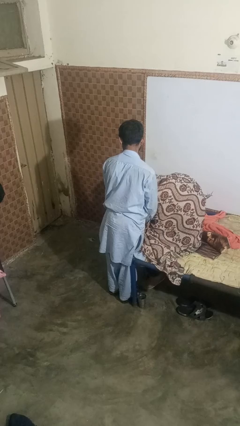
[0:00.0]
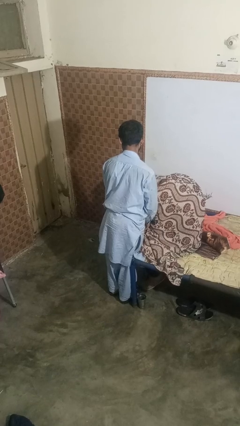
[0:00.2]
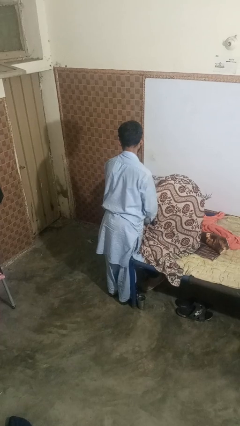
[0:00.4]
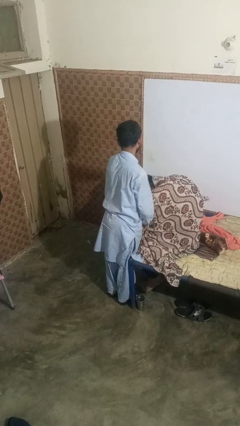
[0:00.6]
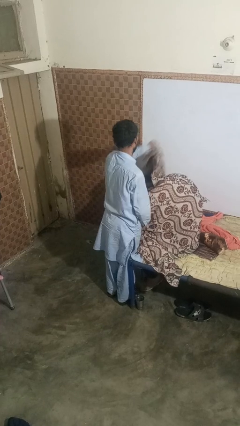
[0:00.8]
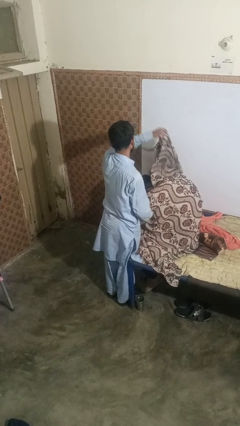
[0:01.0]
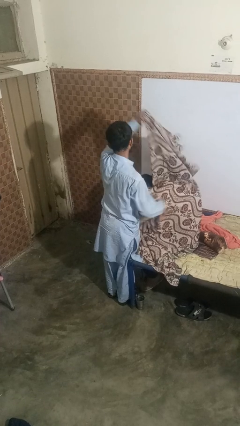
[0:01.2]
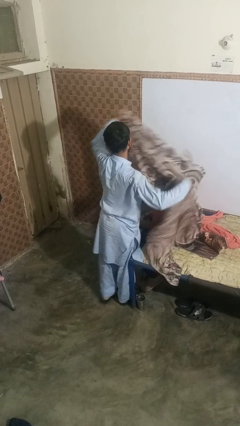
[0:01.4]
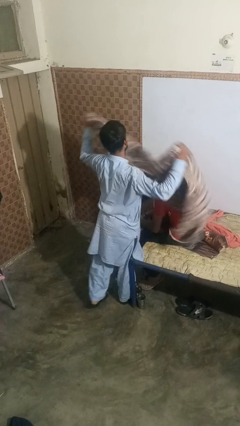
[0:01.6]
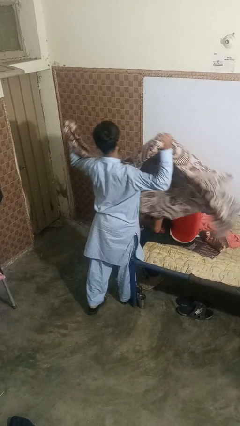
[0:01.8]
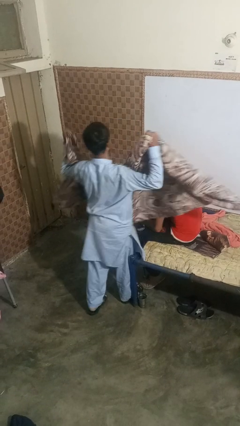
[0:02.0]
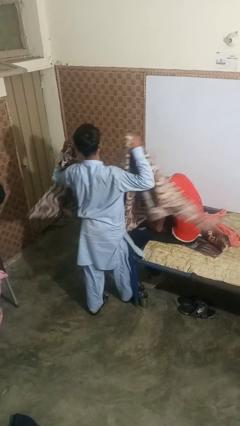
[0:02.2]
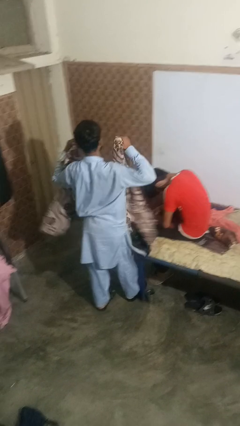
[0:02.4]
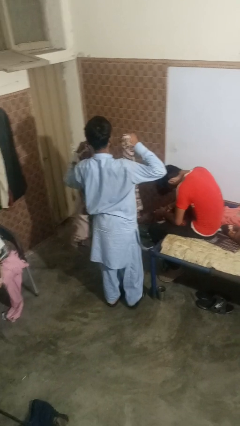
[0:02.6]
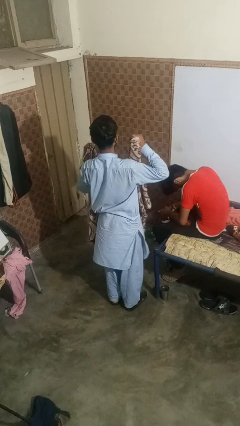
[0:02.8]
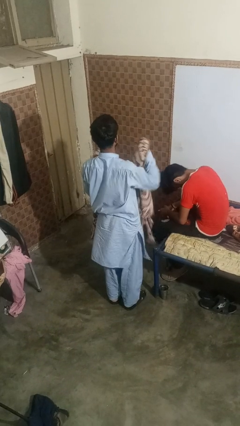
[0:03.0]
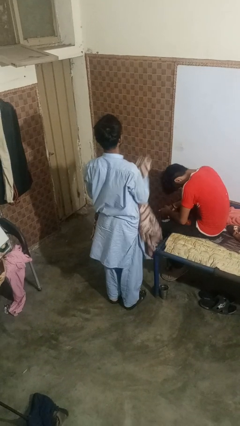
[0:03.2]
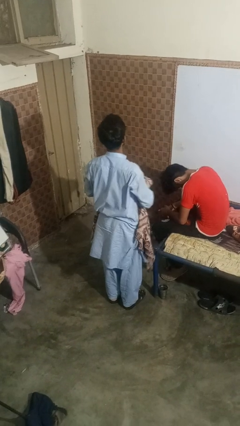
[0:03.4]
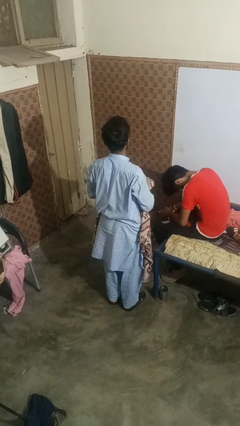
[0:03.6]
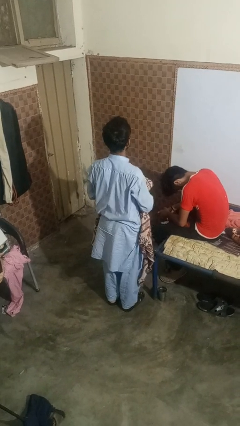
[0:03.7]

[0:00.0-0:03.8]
person uncovers friend with blanket

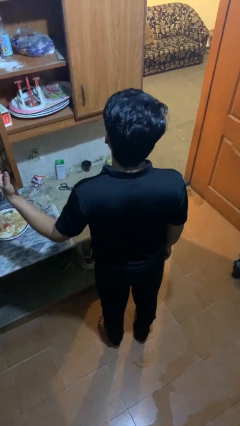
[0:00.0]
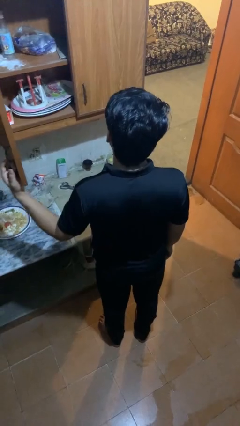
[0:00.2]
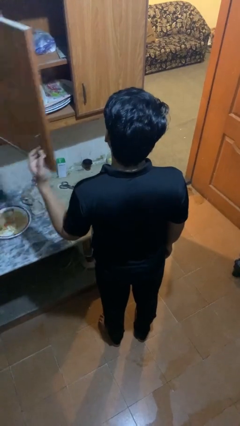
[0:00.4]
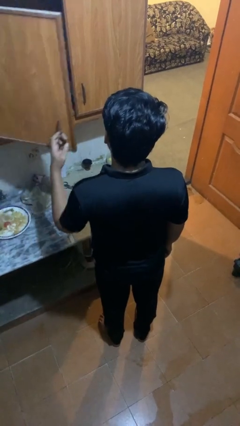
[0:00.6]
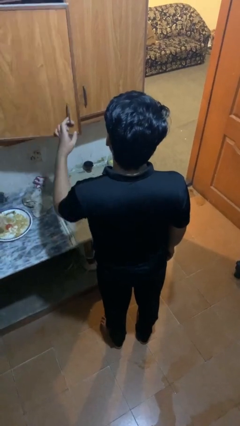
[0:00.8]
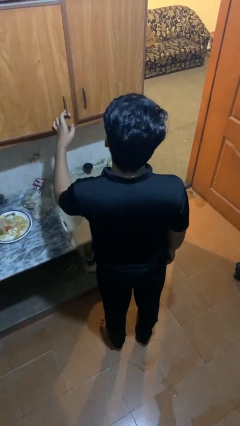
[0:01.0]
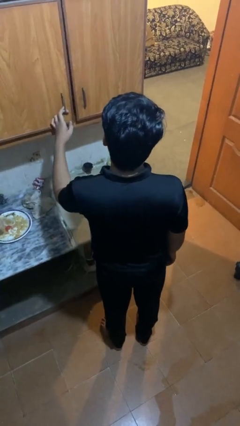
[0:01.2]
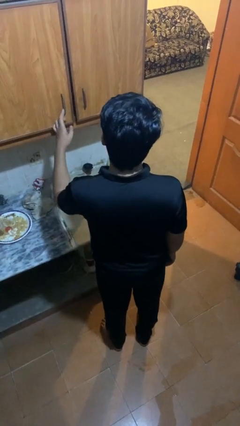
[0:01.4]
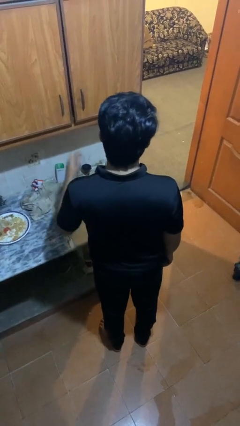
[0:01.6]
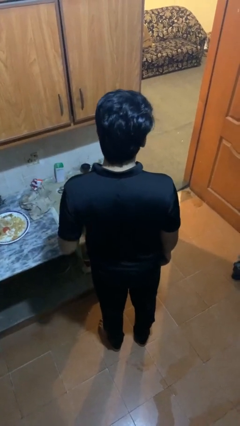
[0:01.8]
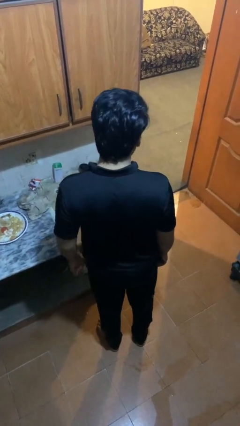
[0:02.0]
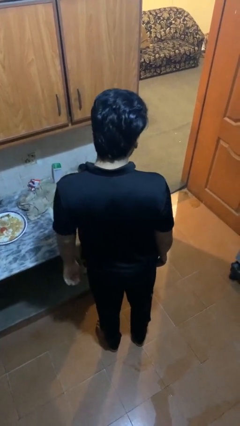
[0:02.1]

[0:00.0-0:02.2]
person closes cabinet

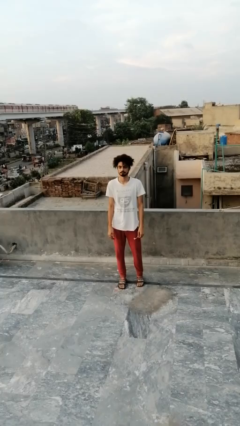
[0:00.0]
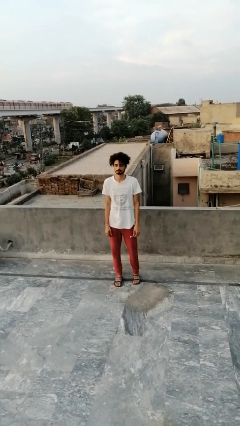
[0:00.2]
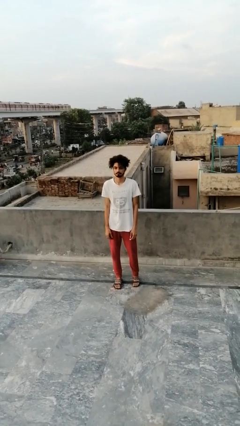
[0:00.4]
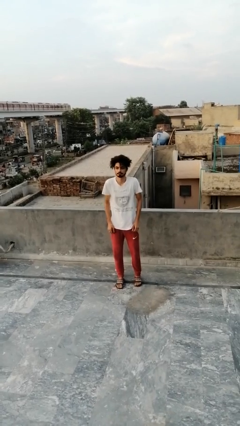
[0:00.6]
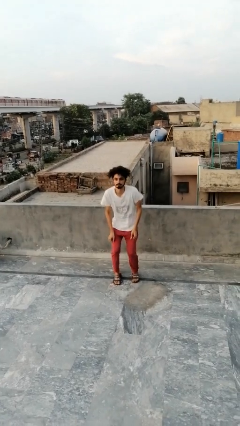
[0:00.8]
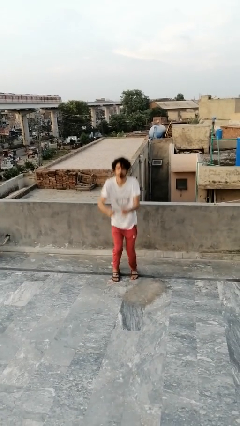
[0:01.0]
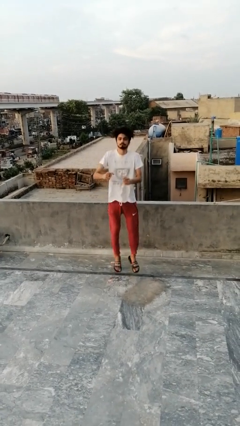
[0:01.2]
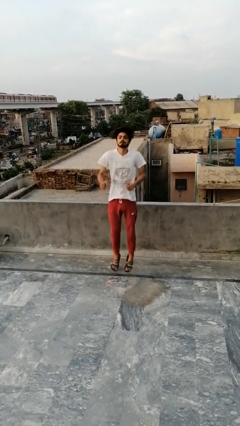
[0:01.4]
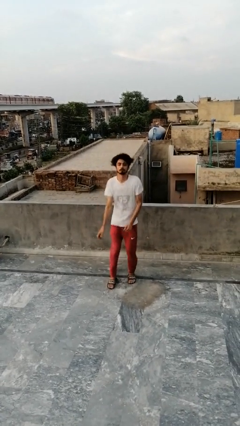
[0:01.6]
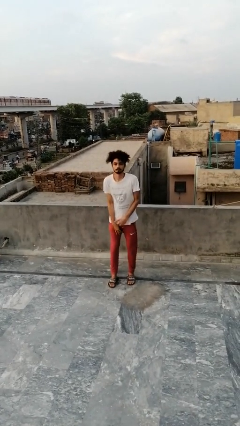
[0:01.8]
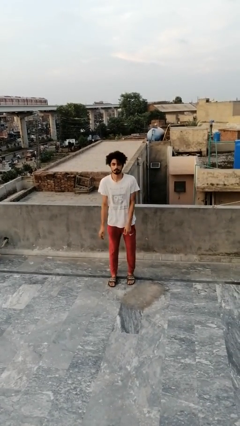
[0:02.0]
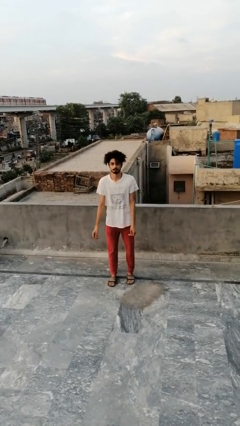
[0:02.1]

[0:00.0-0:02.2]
person jumps

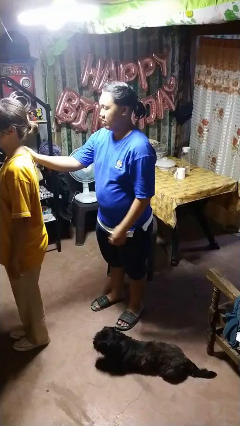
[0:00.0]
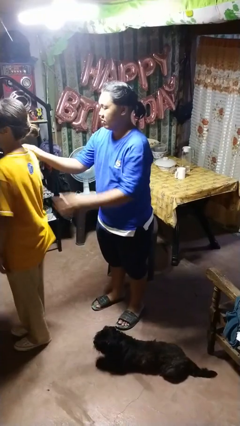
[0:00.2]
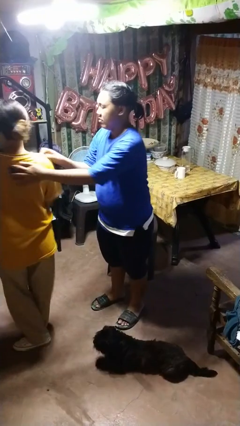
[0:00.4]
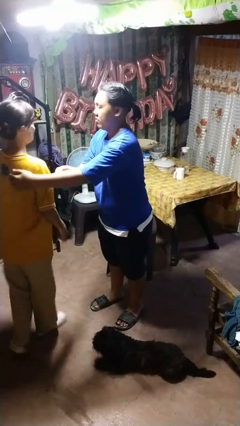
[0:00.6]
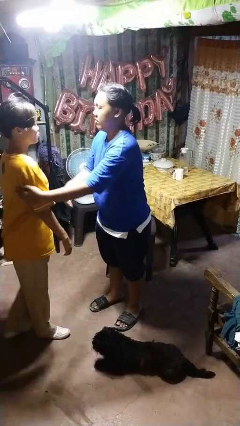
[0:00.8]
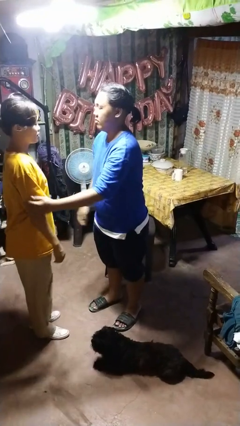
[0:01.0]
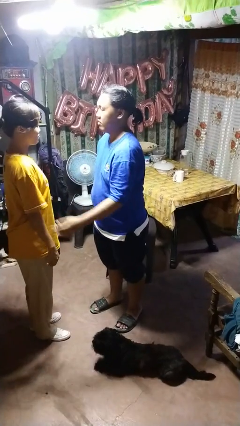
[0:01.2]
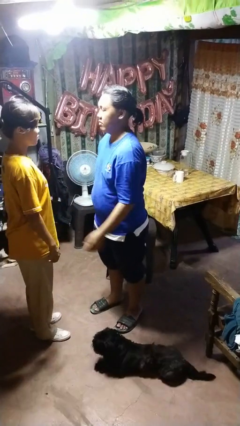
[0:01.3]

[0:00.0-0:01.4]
person spins person around

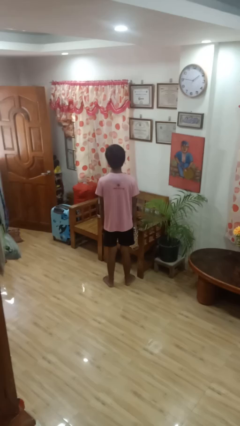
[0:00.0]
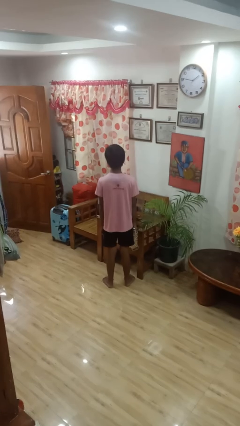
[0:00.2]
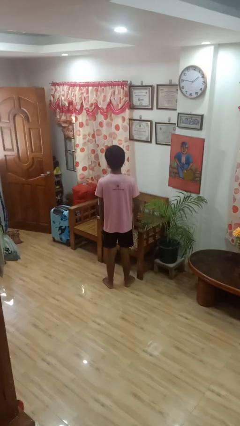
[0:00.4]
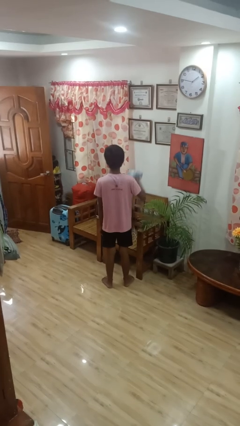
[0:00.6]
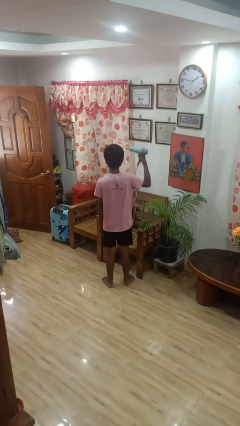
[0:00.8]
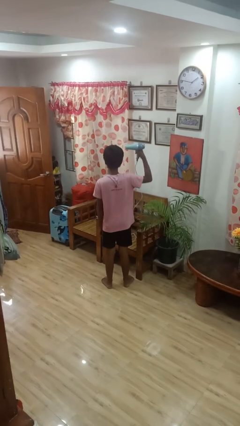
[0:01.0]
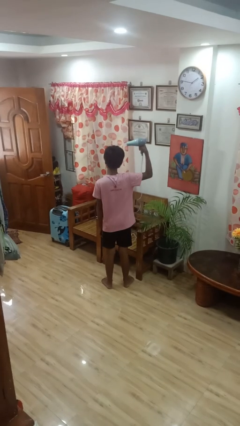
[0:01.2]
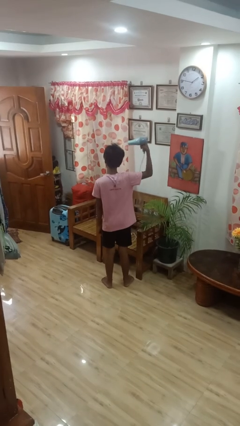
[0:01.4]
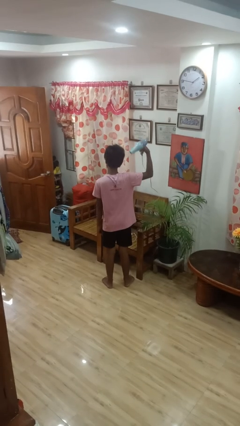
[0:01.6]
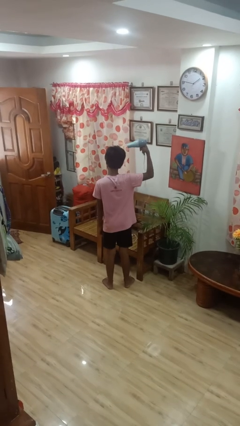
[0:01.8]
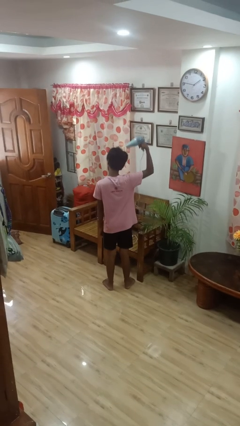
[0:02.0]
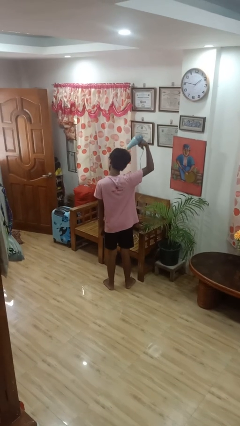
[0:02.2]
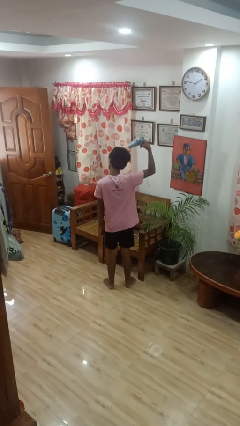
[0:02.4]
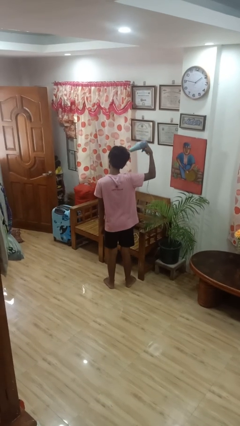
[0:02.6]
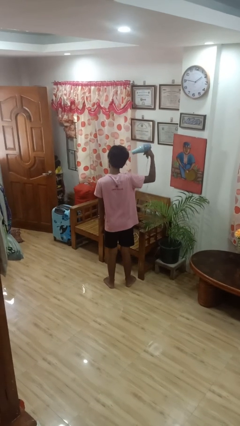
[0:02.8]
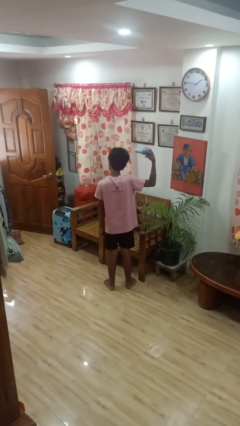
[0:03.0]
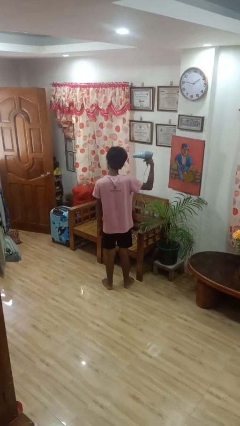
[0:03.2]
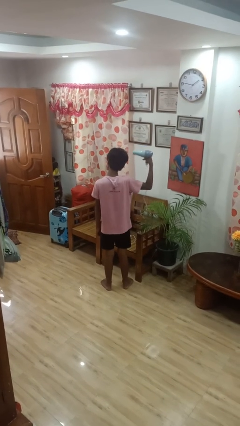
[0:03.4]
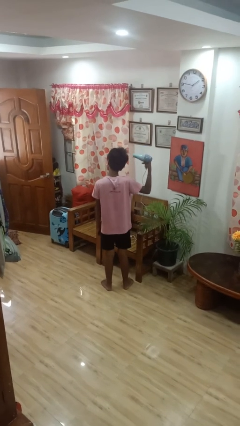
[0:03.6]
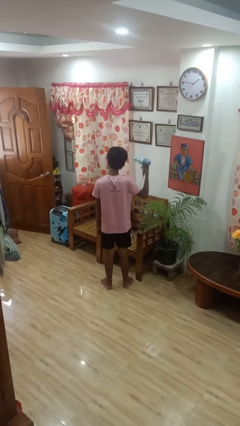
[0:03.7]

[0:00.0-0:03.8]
person dries hair with hairdryer

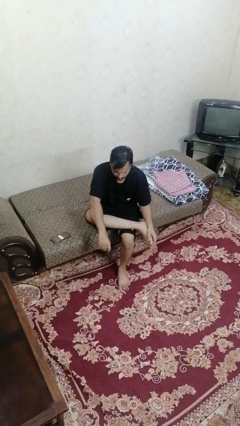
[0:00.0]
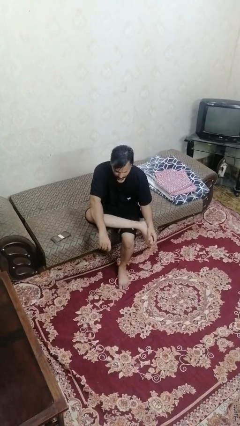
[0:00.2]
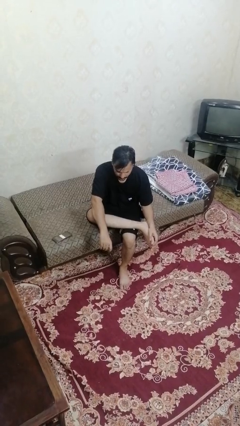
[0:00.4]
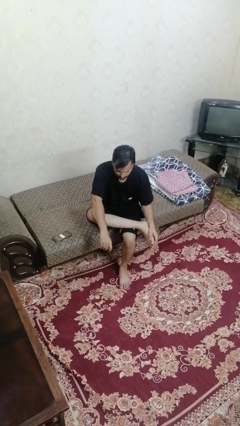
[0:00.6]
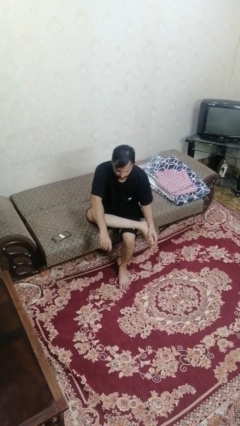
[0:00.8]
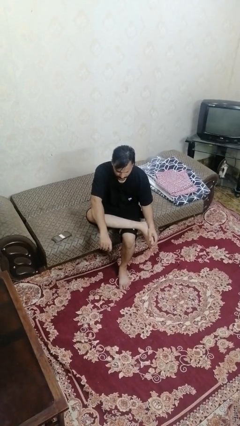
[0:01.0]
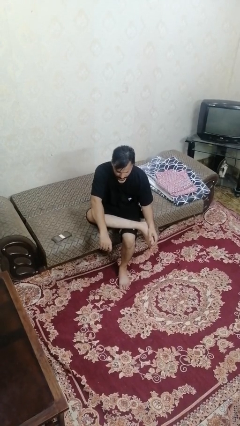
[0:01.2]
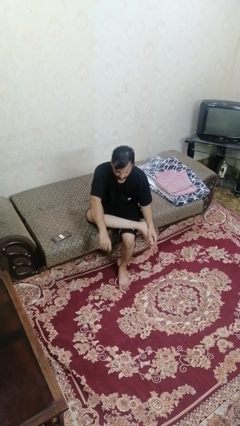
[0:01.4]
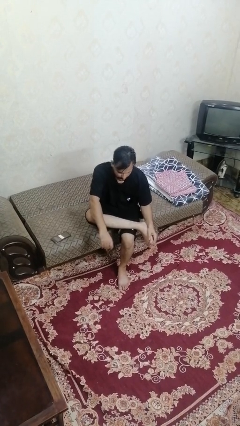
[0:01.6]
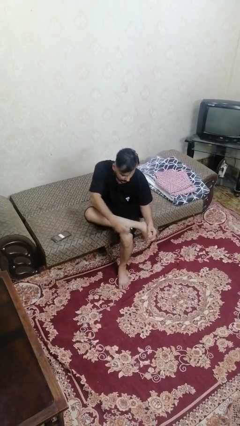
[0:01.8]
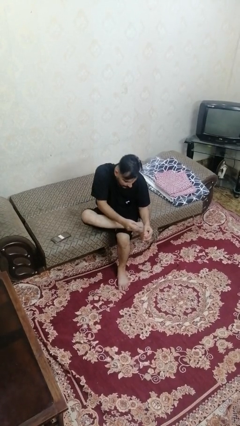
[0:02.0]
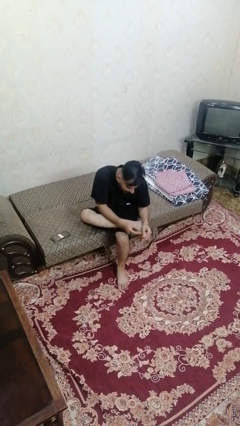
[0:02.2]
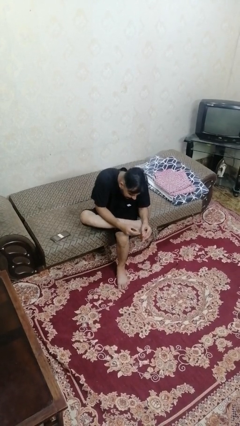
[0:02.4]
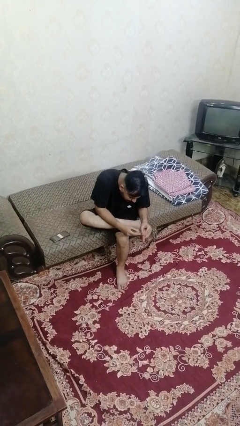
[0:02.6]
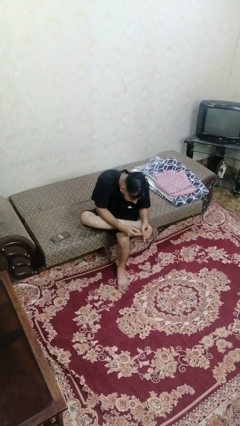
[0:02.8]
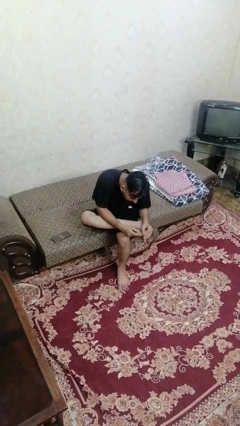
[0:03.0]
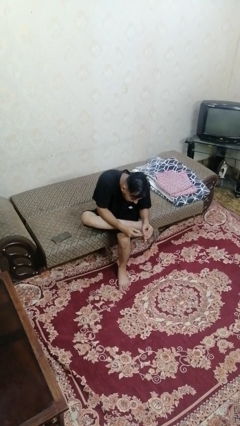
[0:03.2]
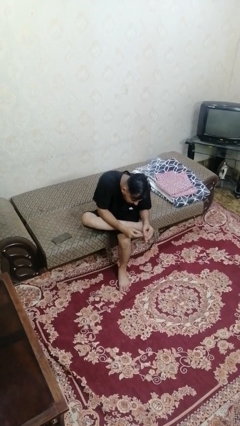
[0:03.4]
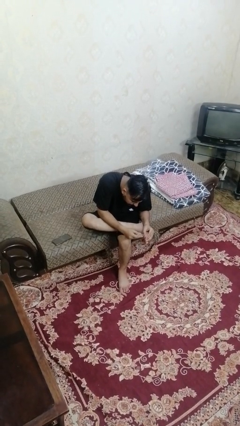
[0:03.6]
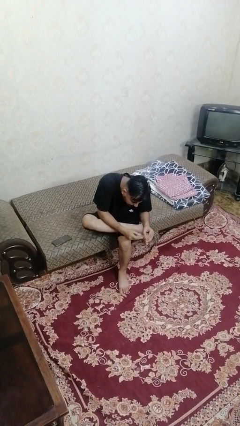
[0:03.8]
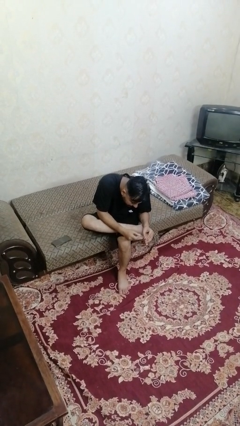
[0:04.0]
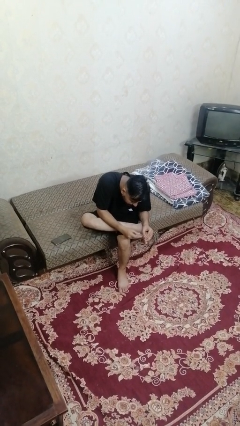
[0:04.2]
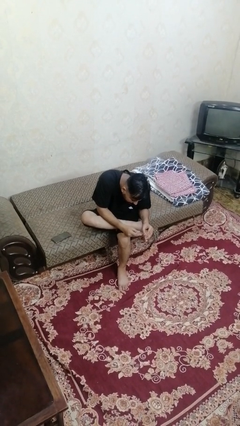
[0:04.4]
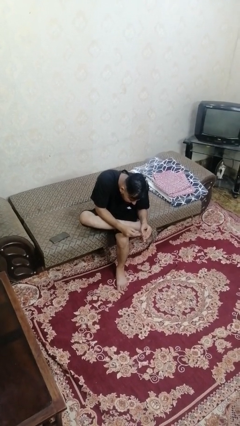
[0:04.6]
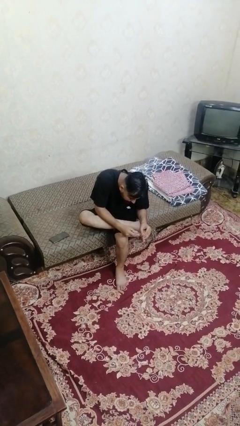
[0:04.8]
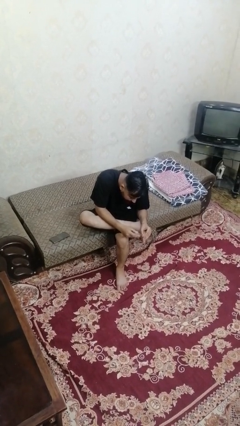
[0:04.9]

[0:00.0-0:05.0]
person clips fingernails
